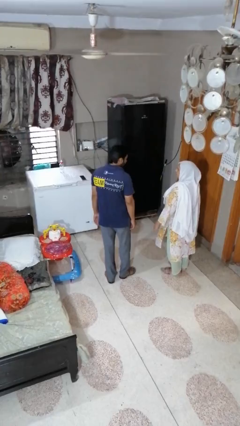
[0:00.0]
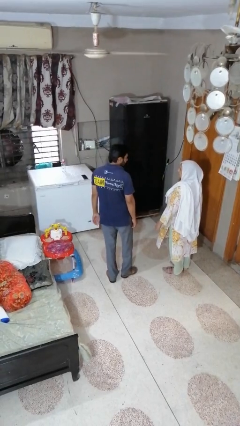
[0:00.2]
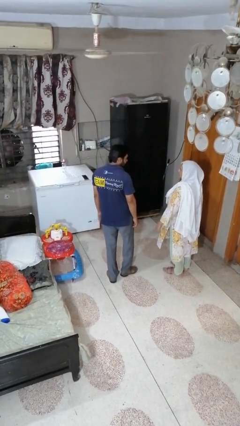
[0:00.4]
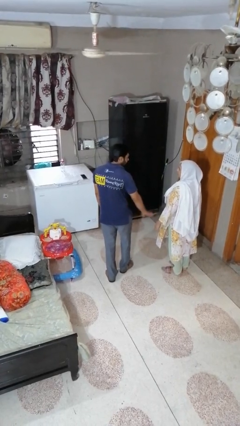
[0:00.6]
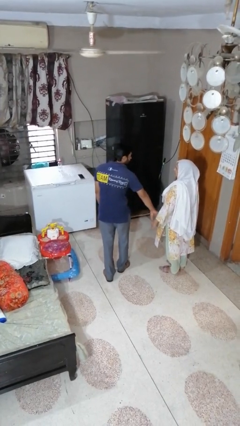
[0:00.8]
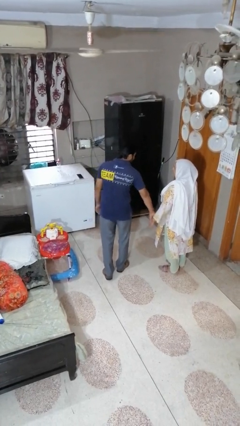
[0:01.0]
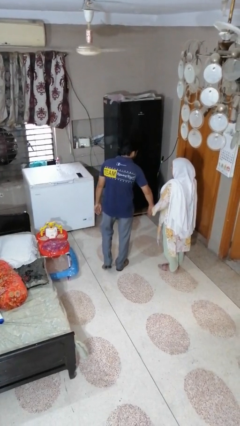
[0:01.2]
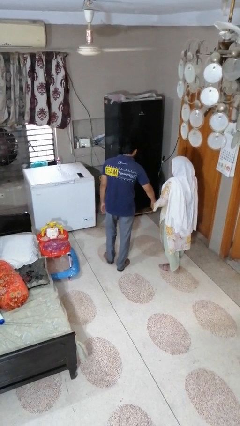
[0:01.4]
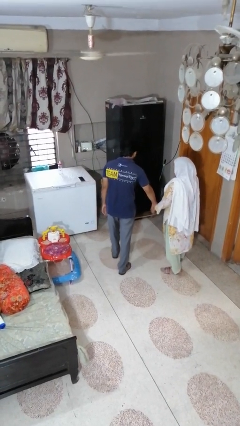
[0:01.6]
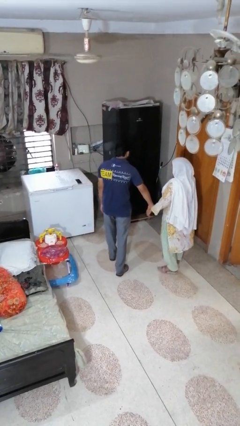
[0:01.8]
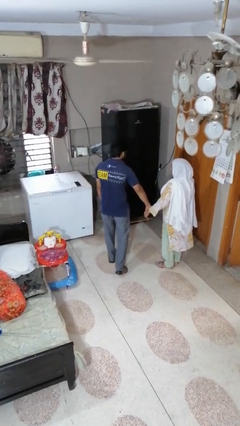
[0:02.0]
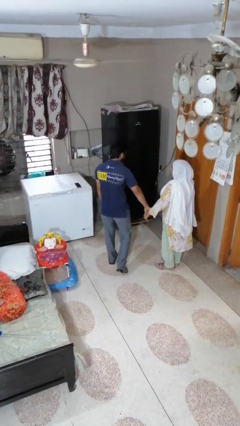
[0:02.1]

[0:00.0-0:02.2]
person grabs person by forearm

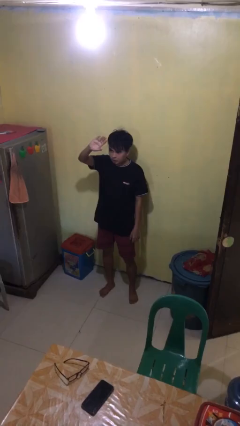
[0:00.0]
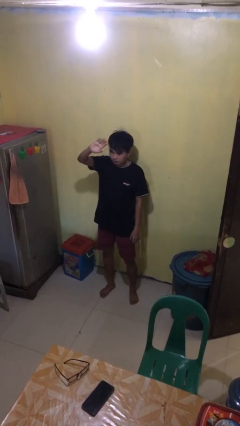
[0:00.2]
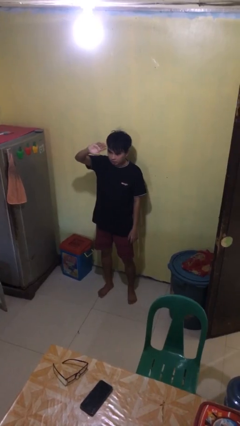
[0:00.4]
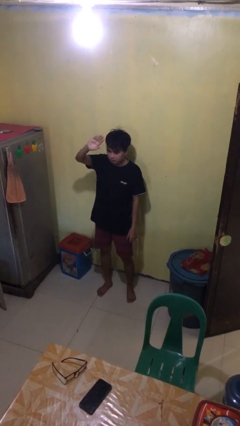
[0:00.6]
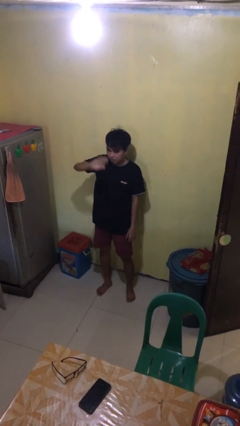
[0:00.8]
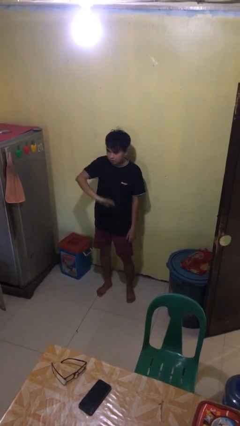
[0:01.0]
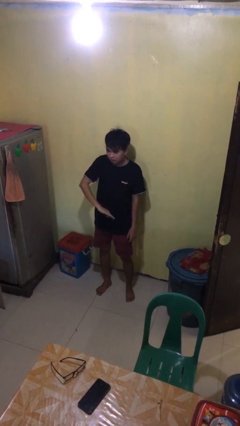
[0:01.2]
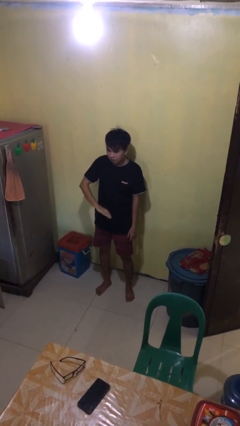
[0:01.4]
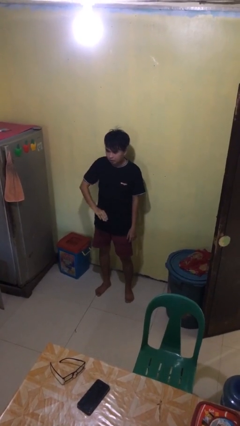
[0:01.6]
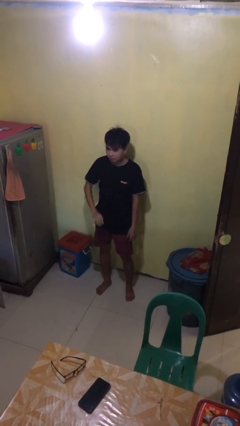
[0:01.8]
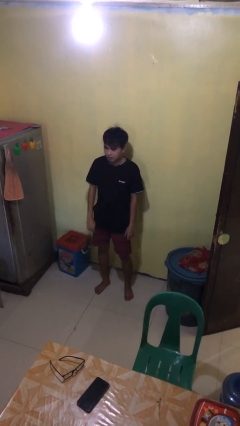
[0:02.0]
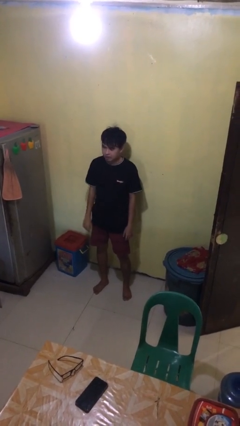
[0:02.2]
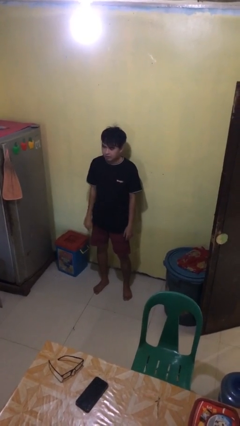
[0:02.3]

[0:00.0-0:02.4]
person gestures swipe down

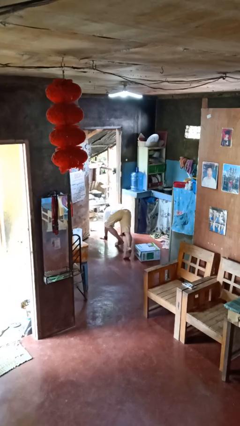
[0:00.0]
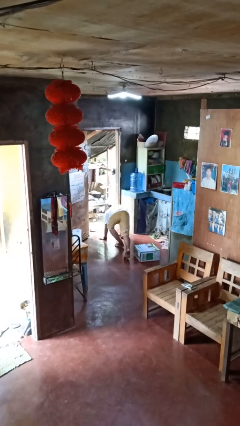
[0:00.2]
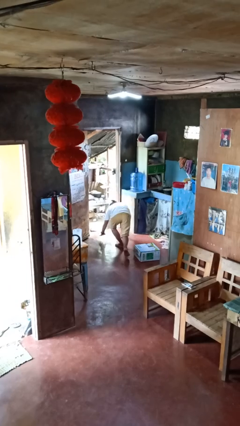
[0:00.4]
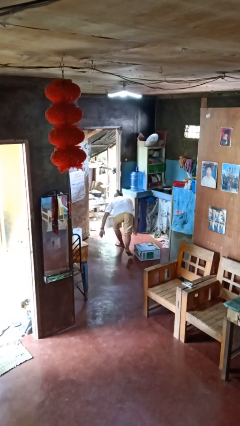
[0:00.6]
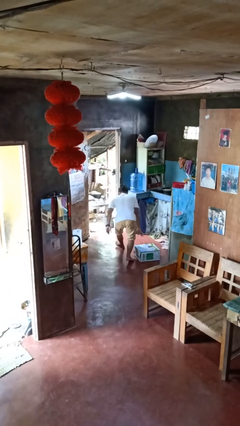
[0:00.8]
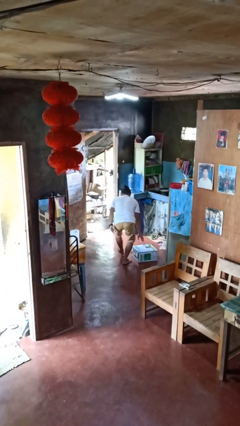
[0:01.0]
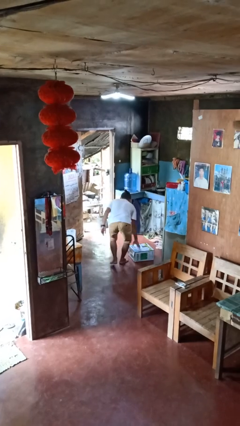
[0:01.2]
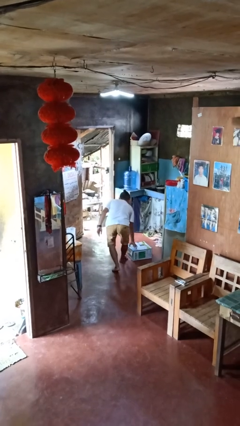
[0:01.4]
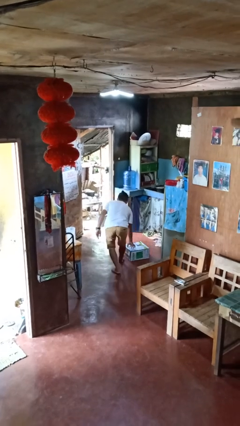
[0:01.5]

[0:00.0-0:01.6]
person stands up from floor

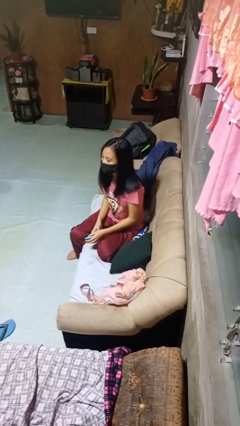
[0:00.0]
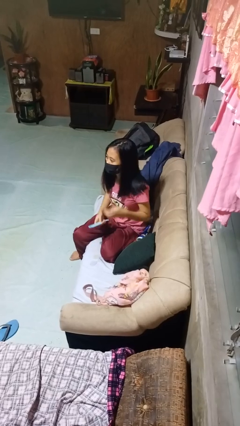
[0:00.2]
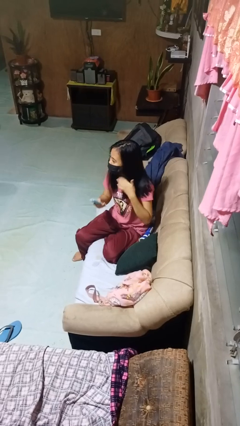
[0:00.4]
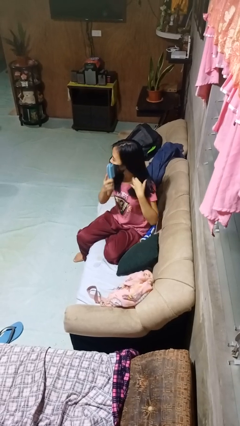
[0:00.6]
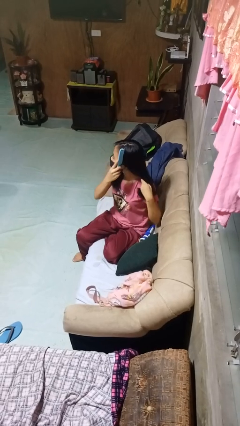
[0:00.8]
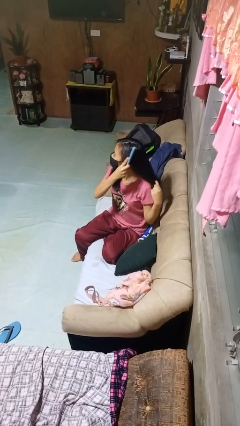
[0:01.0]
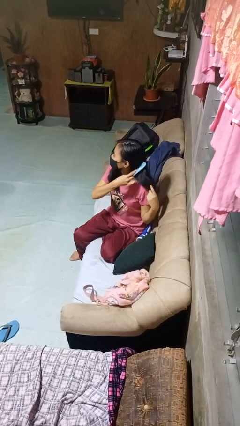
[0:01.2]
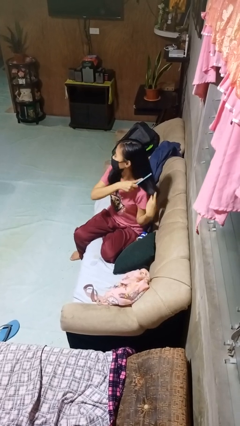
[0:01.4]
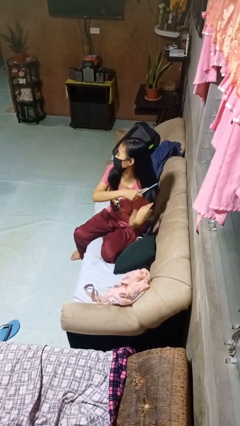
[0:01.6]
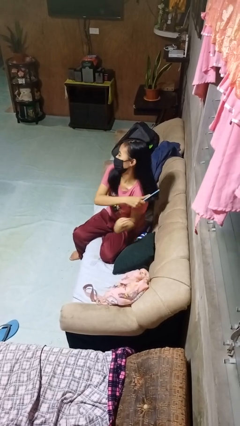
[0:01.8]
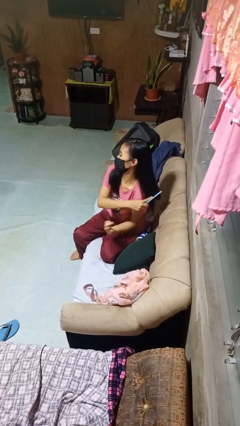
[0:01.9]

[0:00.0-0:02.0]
person brushes hair

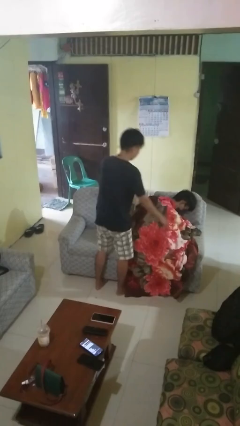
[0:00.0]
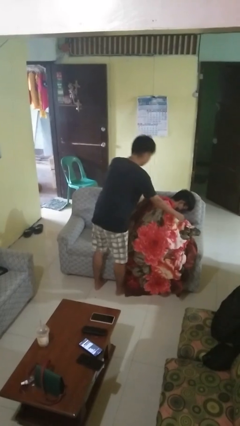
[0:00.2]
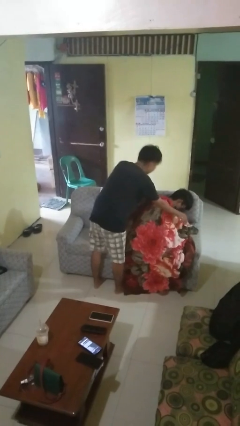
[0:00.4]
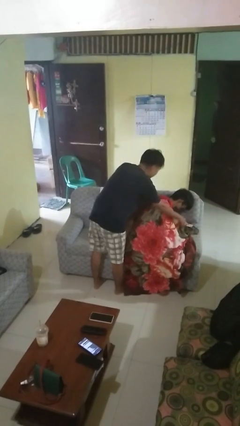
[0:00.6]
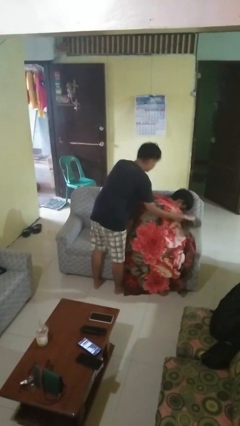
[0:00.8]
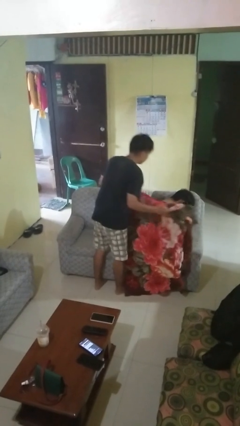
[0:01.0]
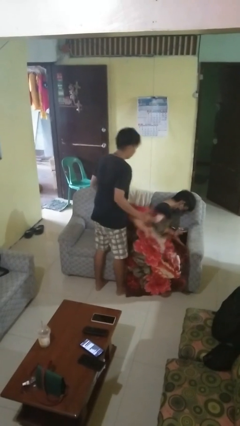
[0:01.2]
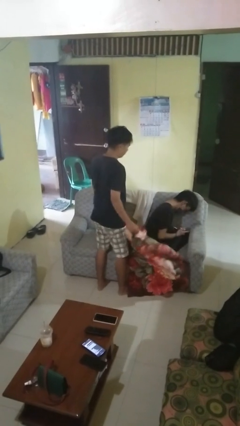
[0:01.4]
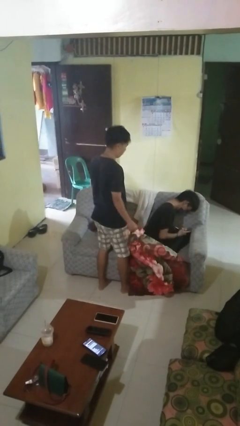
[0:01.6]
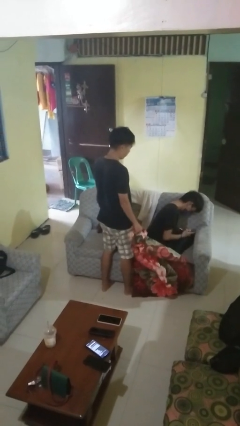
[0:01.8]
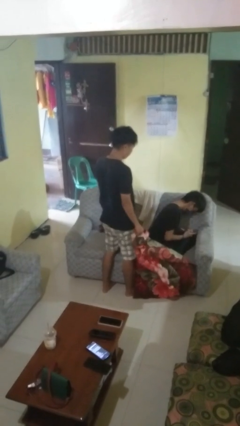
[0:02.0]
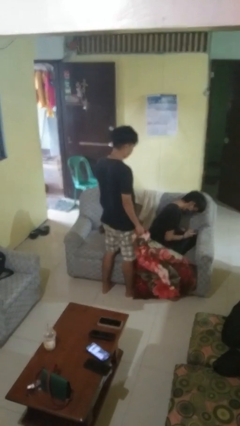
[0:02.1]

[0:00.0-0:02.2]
person uncovers friend with blanket

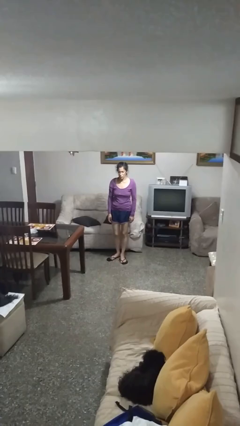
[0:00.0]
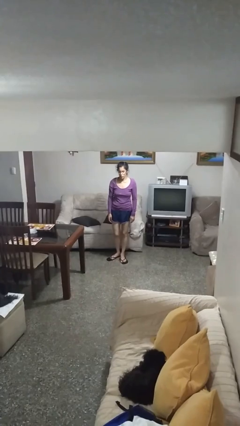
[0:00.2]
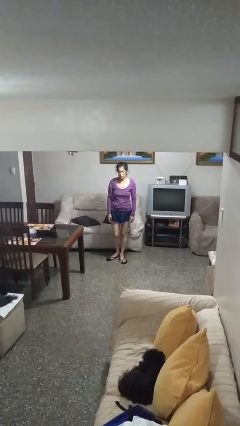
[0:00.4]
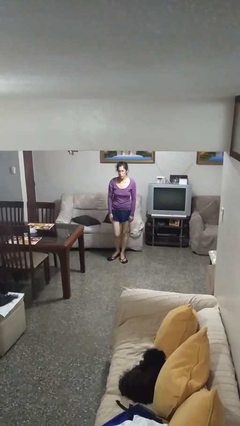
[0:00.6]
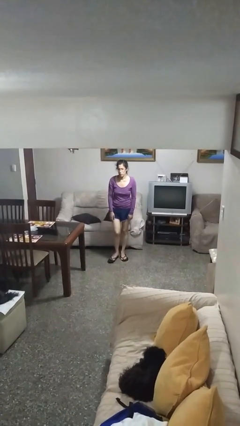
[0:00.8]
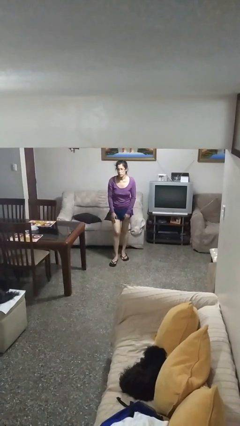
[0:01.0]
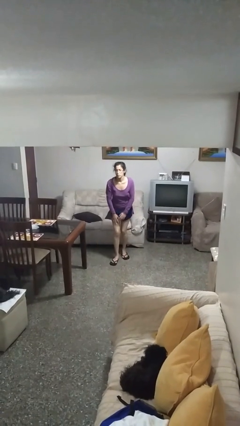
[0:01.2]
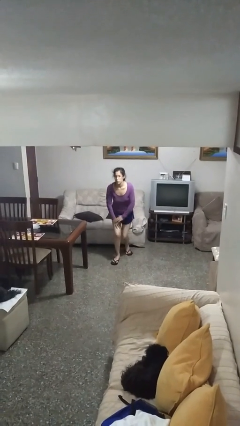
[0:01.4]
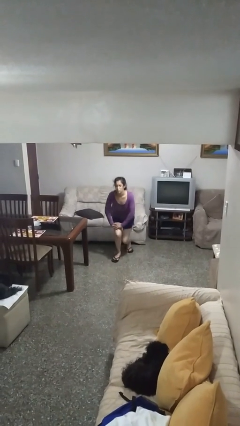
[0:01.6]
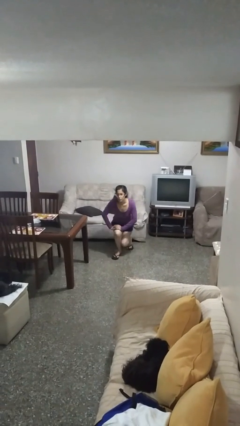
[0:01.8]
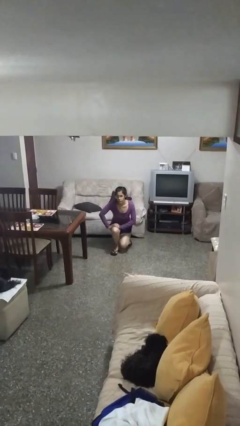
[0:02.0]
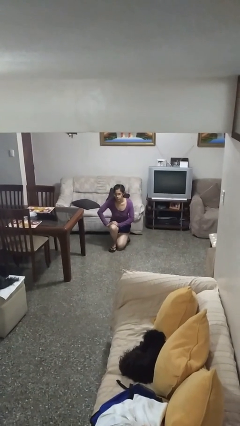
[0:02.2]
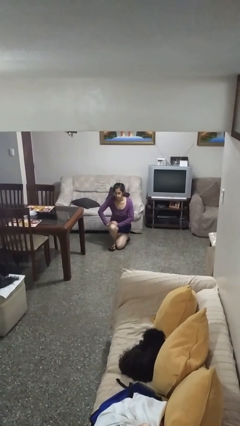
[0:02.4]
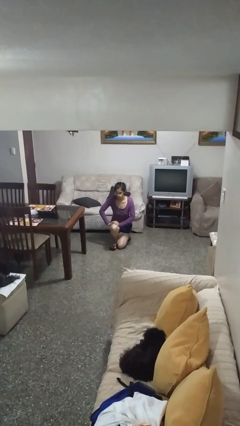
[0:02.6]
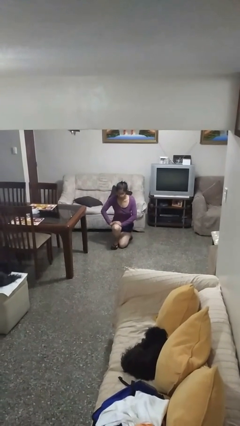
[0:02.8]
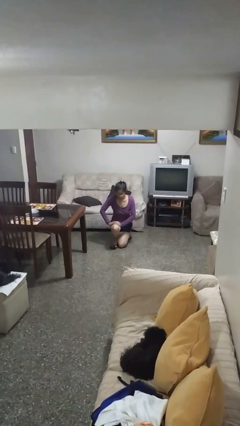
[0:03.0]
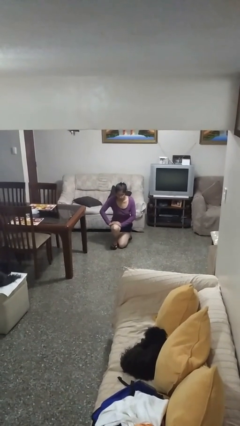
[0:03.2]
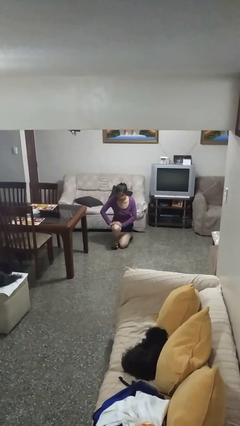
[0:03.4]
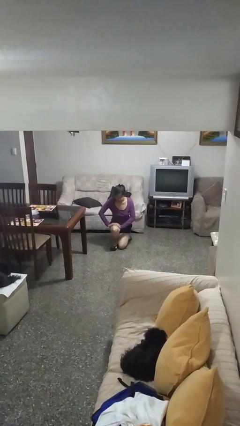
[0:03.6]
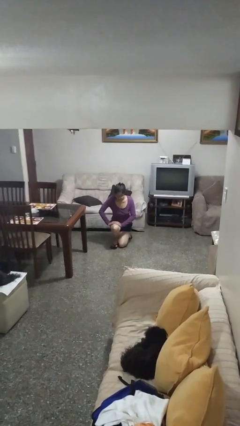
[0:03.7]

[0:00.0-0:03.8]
person kneels

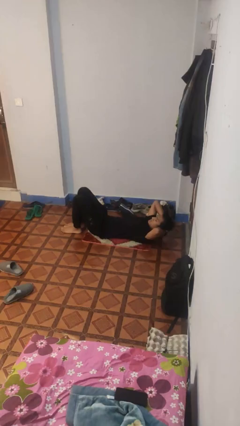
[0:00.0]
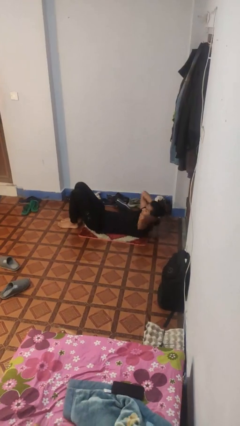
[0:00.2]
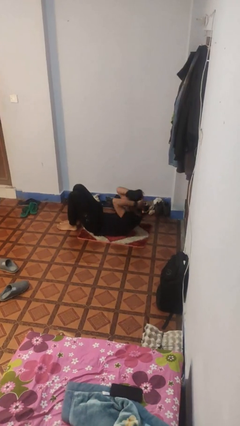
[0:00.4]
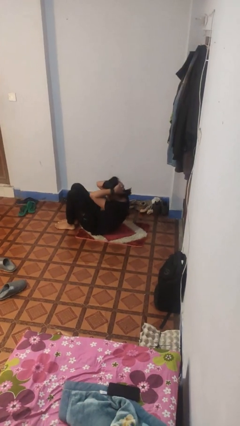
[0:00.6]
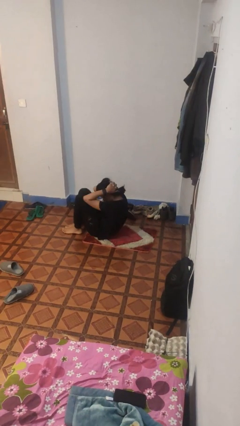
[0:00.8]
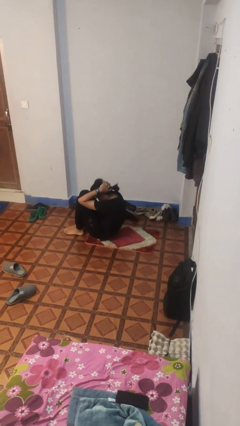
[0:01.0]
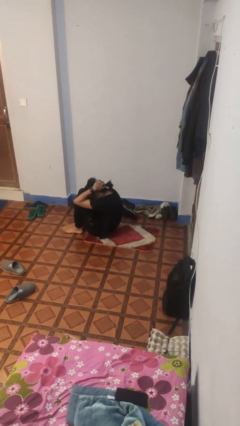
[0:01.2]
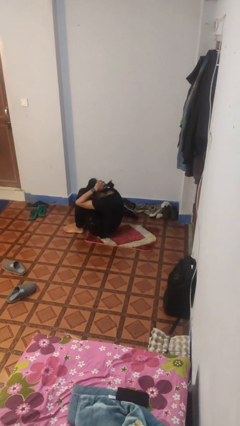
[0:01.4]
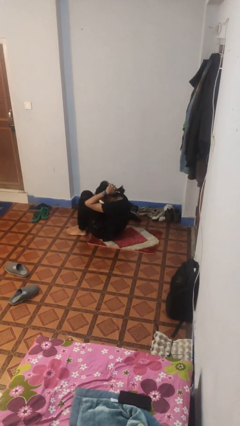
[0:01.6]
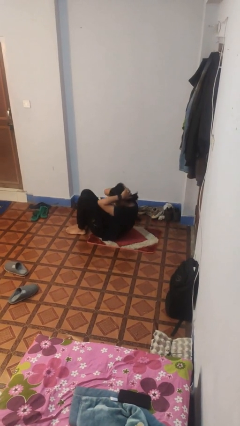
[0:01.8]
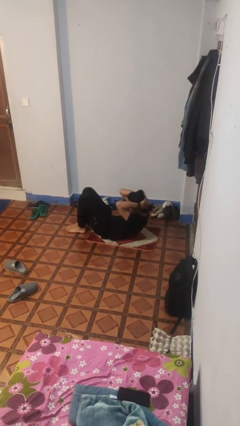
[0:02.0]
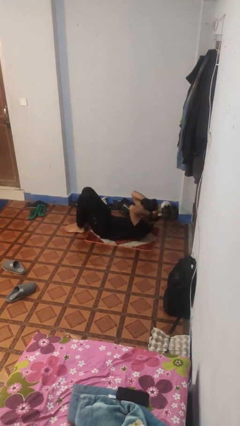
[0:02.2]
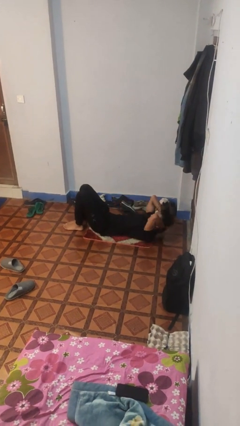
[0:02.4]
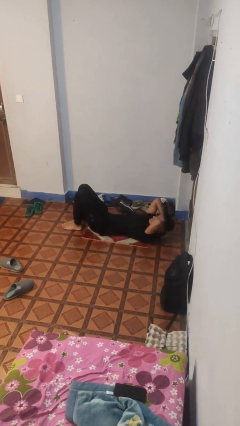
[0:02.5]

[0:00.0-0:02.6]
person exercises with situp

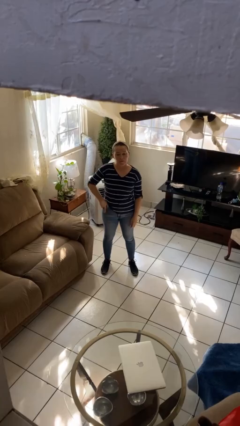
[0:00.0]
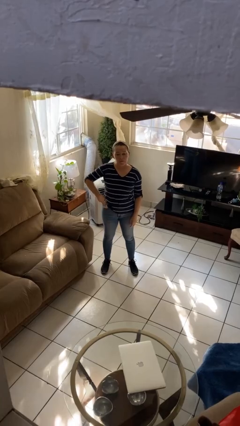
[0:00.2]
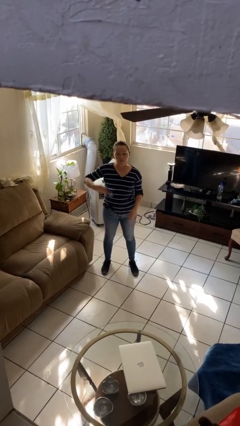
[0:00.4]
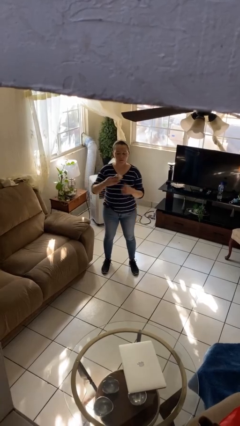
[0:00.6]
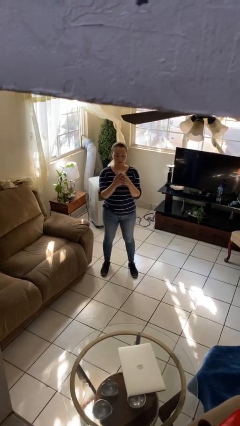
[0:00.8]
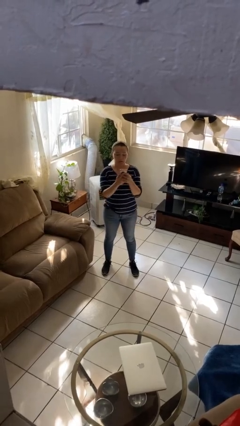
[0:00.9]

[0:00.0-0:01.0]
person takes phone from pocket
